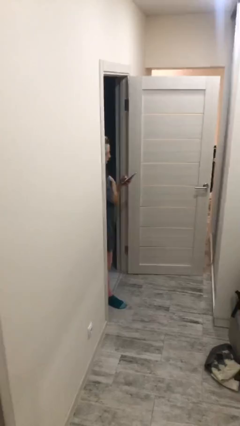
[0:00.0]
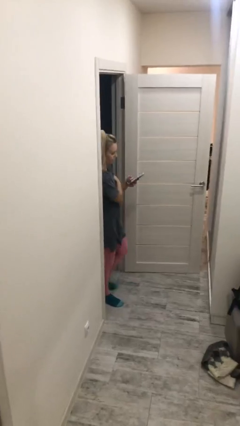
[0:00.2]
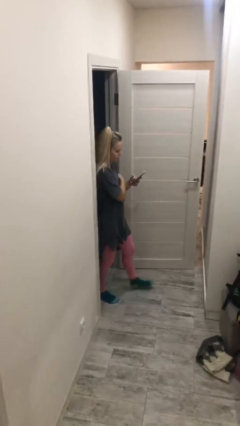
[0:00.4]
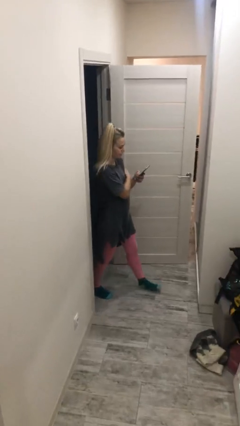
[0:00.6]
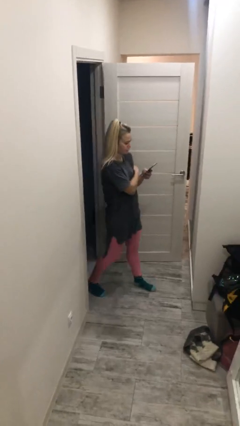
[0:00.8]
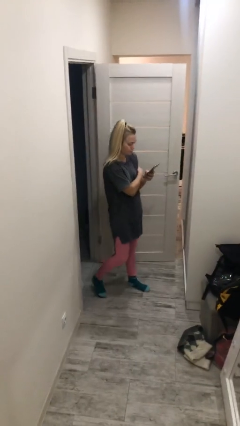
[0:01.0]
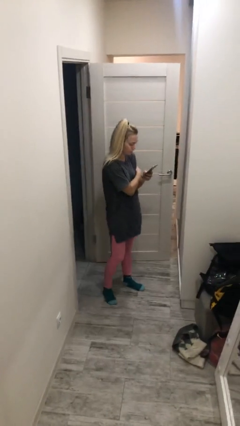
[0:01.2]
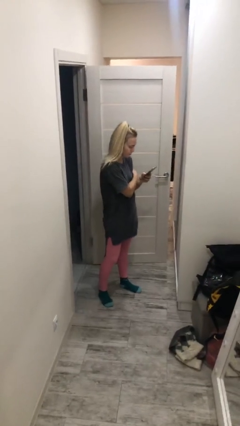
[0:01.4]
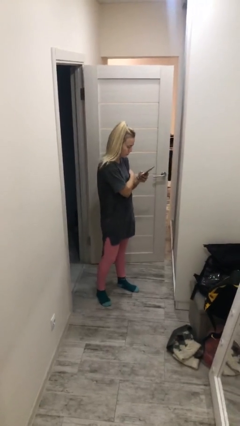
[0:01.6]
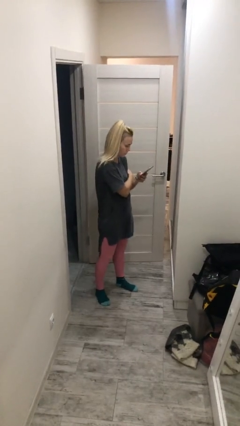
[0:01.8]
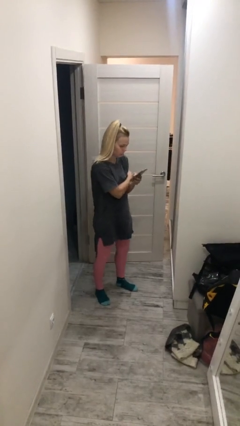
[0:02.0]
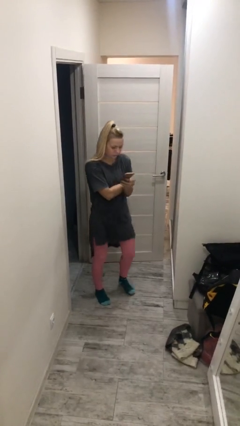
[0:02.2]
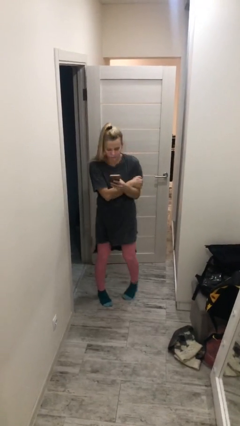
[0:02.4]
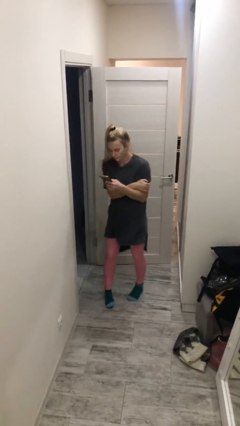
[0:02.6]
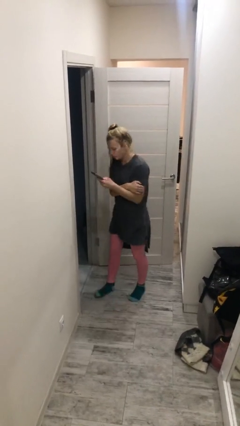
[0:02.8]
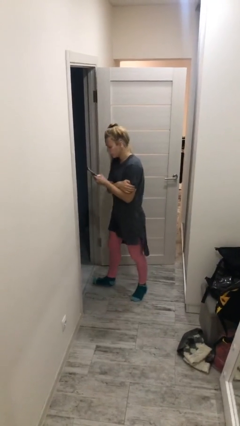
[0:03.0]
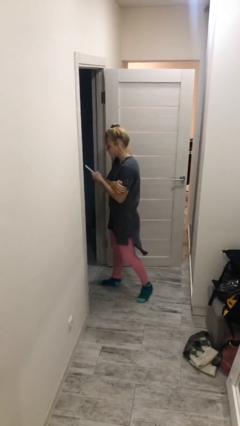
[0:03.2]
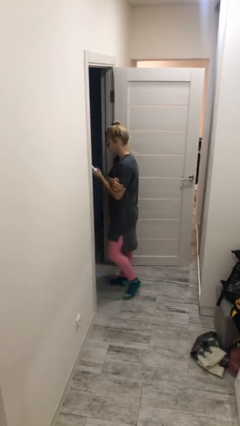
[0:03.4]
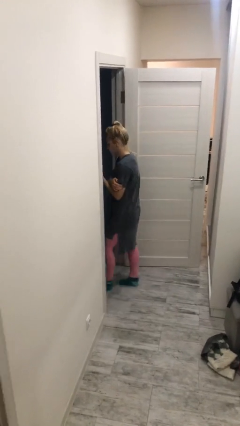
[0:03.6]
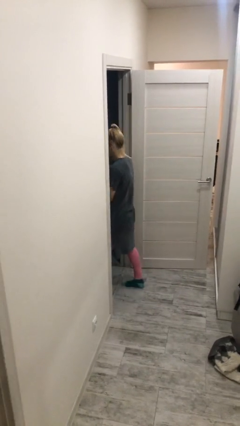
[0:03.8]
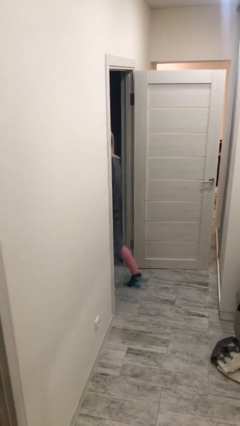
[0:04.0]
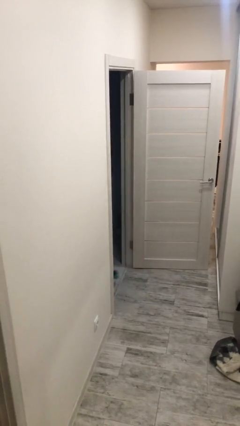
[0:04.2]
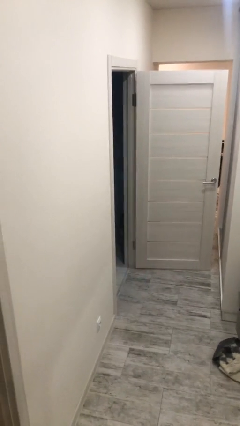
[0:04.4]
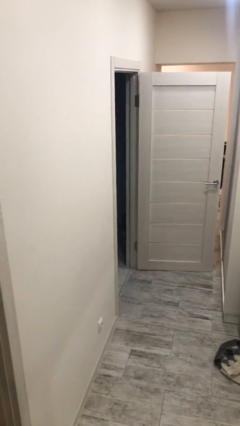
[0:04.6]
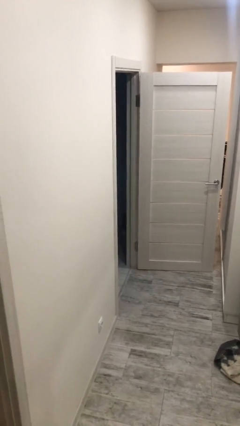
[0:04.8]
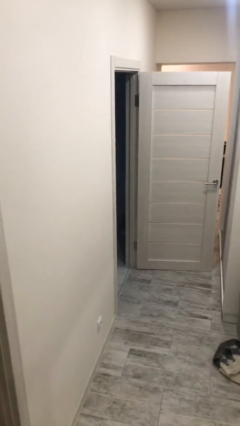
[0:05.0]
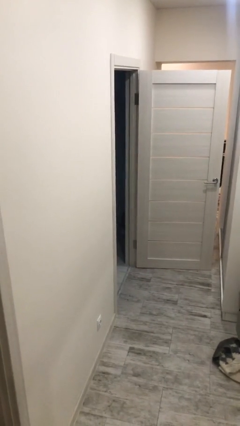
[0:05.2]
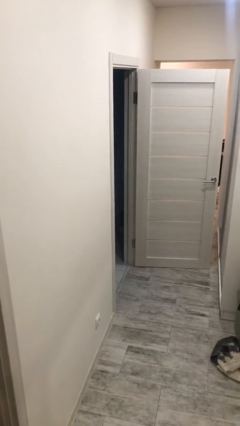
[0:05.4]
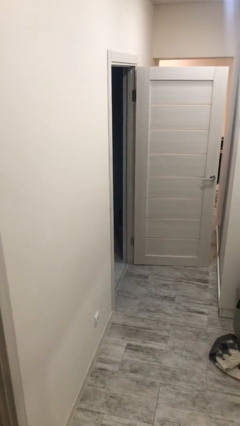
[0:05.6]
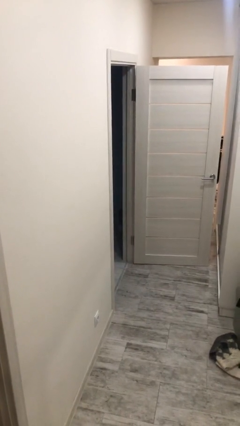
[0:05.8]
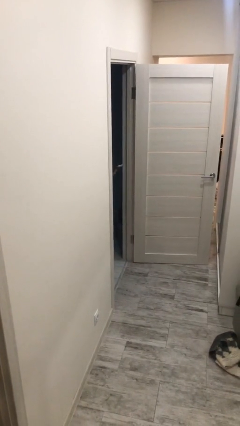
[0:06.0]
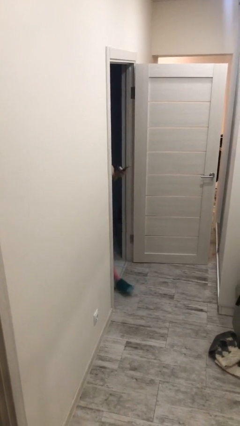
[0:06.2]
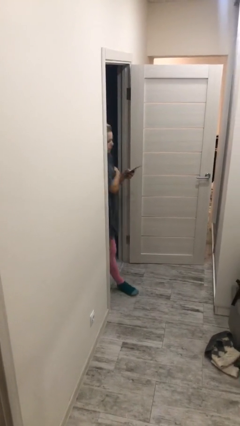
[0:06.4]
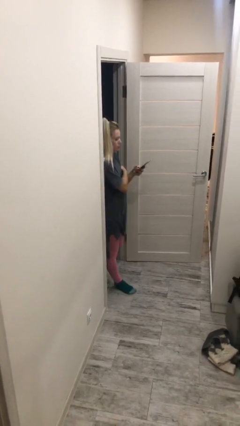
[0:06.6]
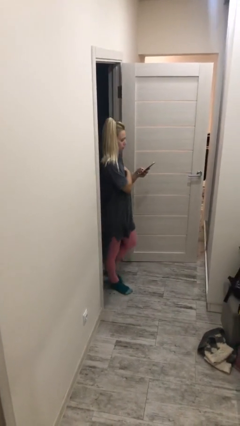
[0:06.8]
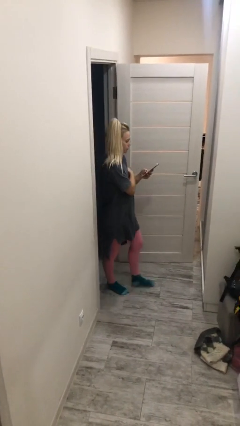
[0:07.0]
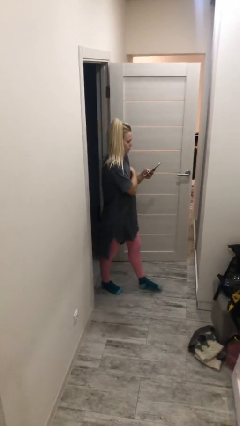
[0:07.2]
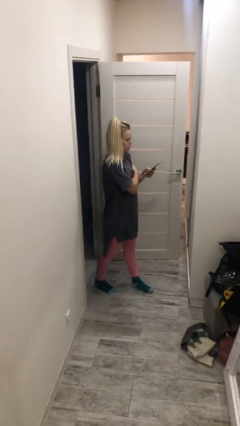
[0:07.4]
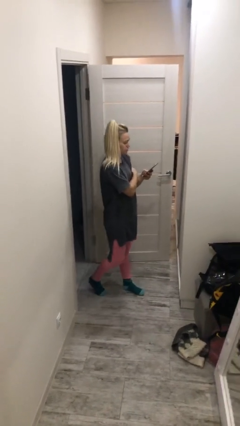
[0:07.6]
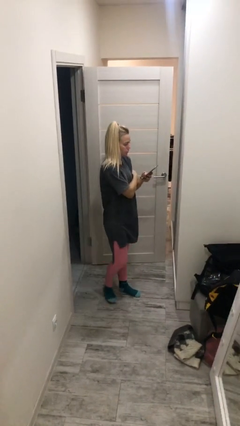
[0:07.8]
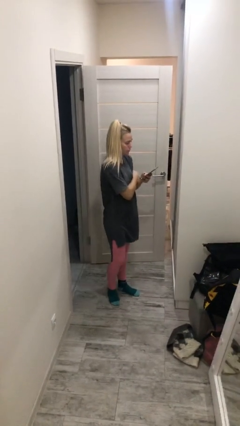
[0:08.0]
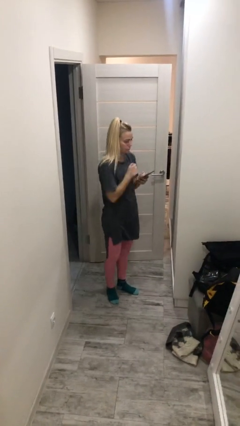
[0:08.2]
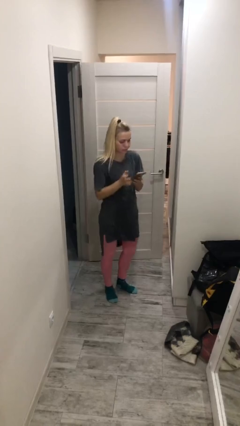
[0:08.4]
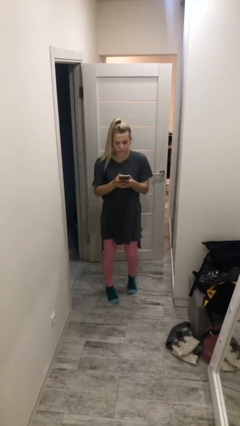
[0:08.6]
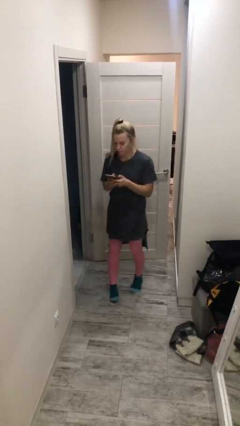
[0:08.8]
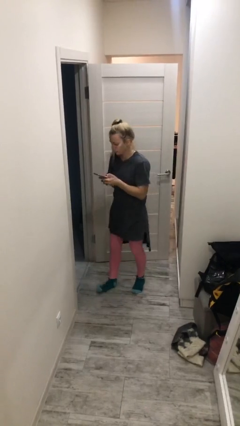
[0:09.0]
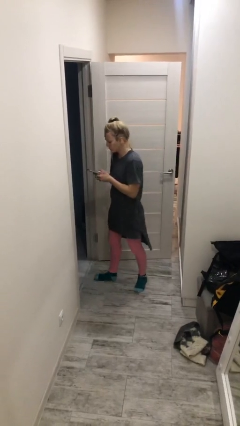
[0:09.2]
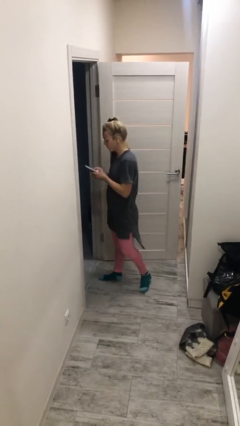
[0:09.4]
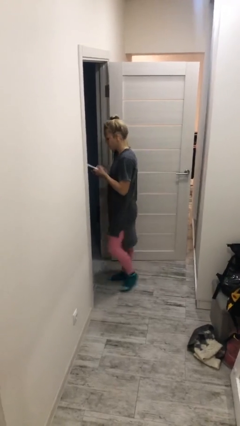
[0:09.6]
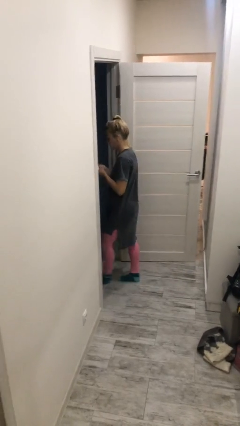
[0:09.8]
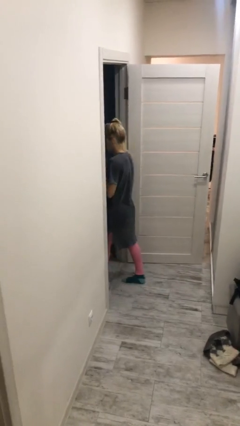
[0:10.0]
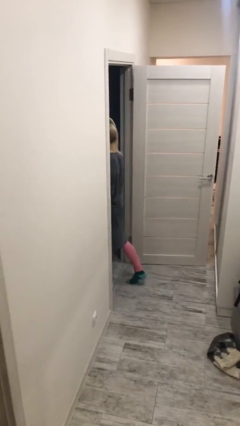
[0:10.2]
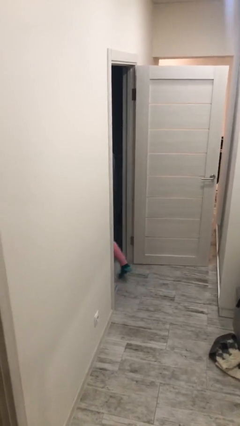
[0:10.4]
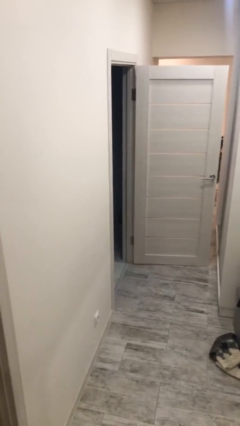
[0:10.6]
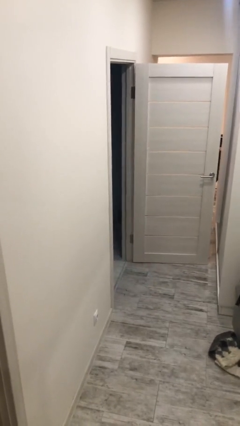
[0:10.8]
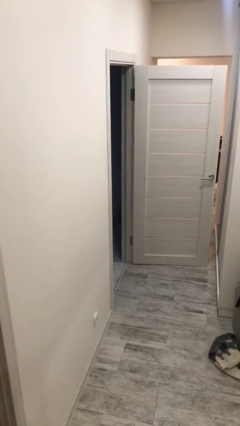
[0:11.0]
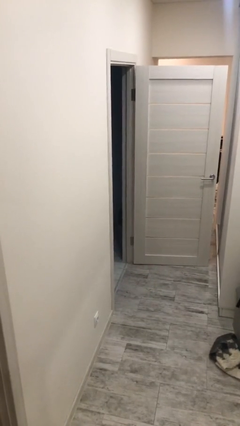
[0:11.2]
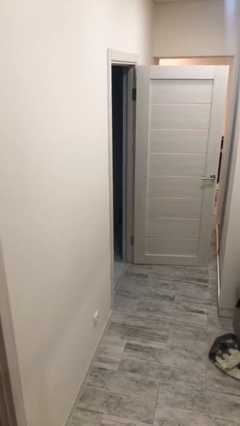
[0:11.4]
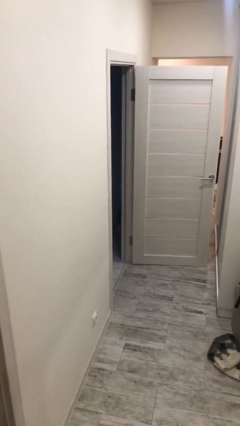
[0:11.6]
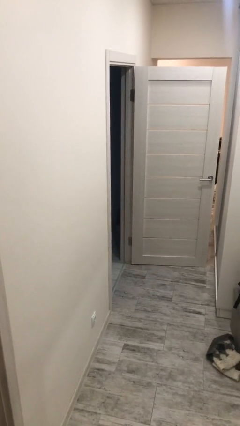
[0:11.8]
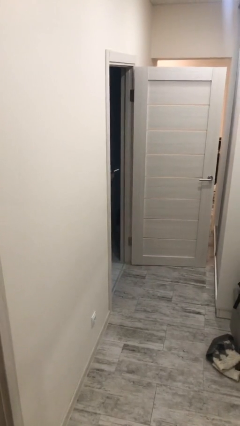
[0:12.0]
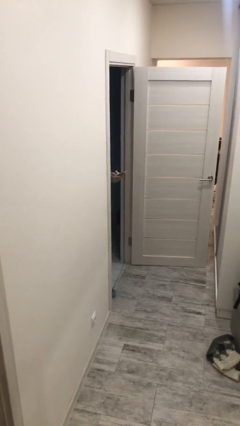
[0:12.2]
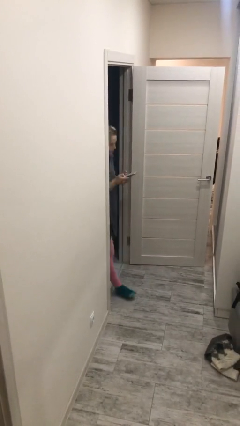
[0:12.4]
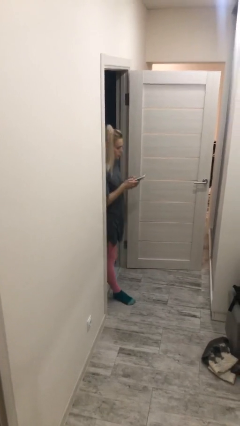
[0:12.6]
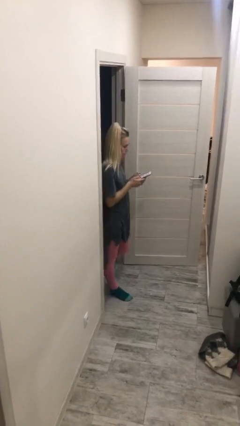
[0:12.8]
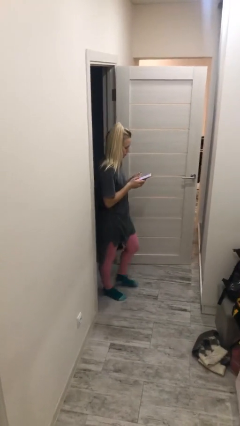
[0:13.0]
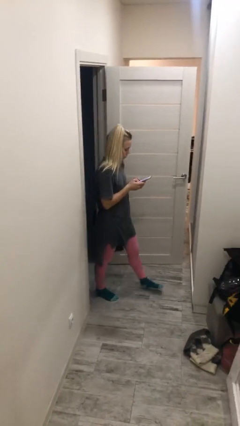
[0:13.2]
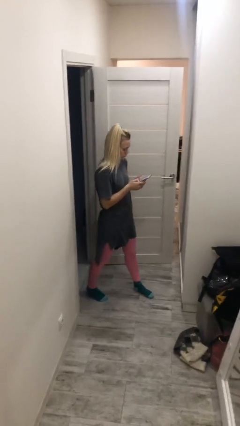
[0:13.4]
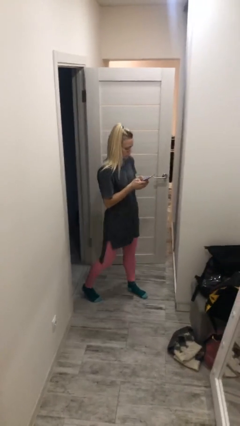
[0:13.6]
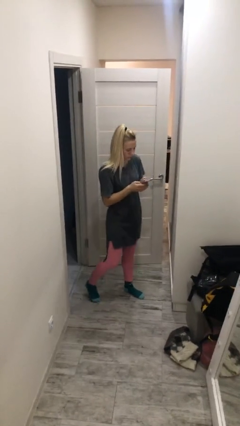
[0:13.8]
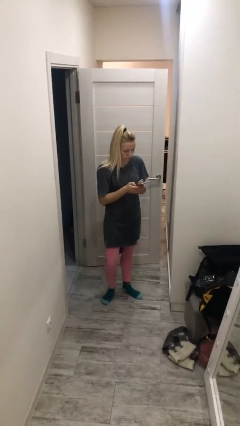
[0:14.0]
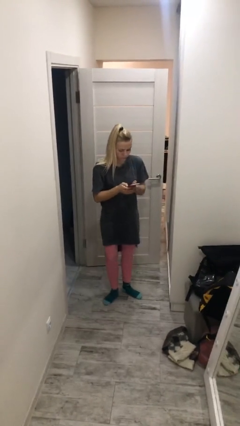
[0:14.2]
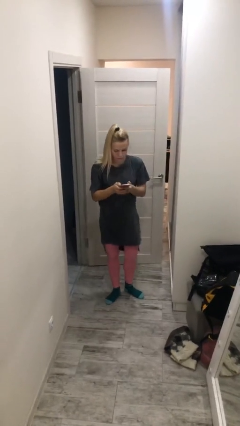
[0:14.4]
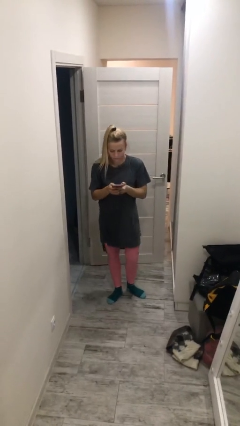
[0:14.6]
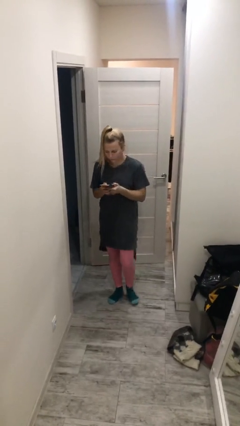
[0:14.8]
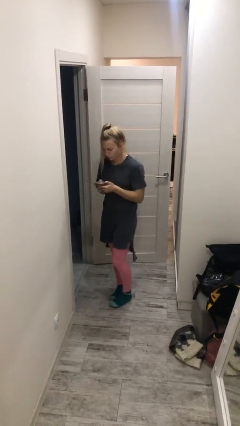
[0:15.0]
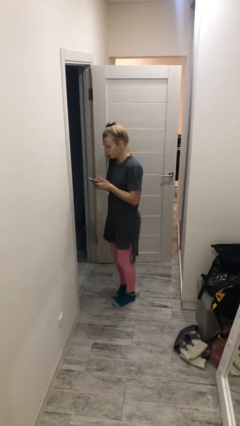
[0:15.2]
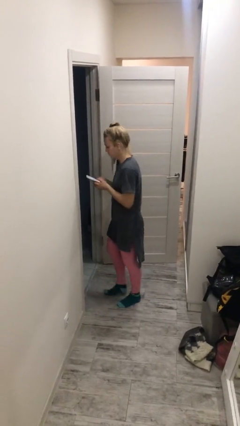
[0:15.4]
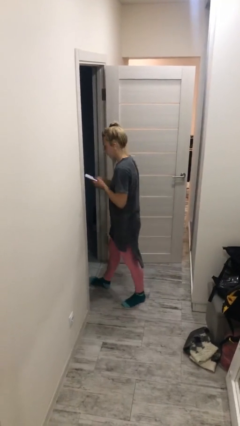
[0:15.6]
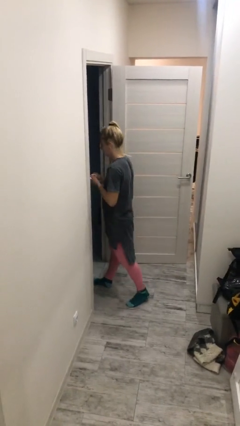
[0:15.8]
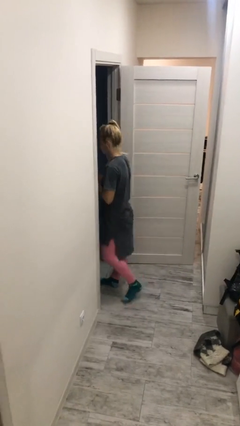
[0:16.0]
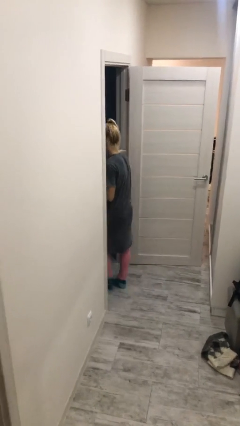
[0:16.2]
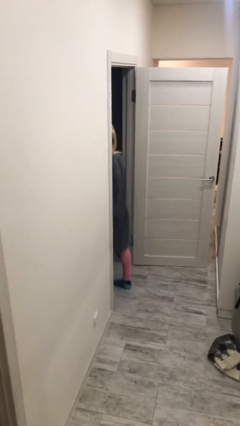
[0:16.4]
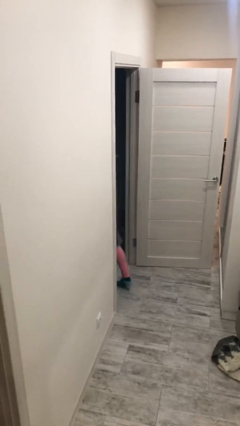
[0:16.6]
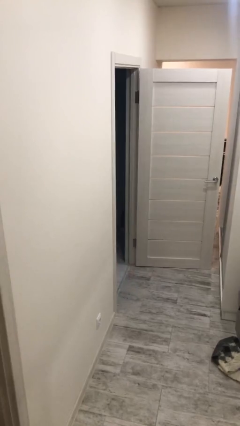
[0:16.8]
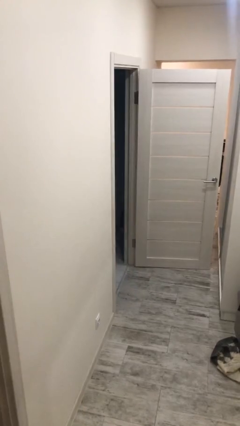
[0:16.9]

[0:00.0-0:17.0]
person texts on phone

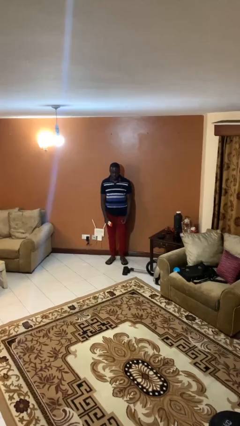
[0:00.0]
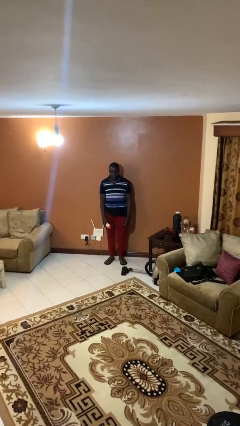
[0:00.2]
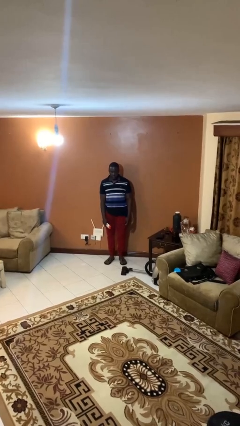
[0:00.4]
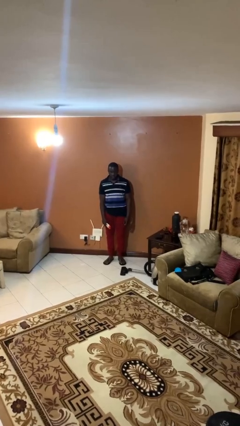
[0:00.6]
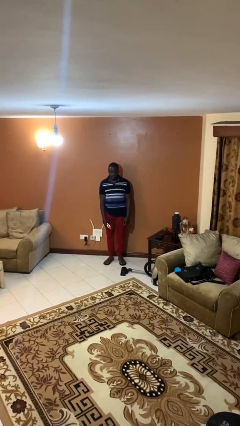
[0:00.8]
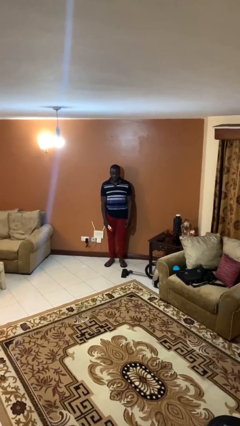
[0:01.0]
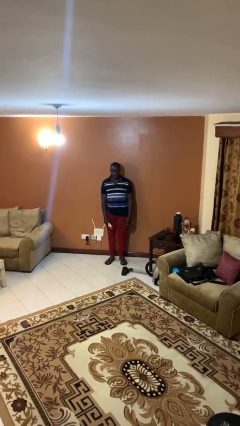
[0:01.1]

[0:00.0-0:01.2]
person applies deodorant
